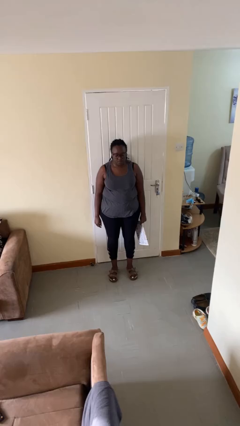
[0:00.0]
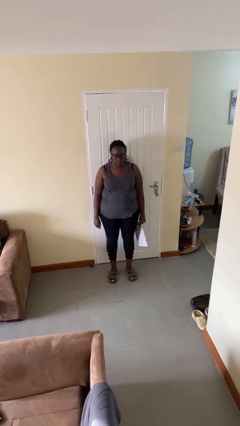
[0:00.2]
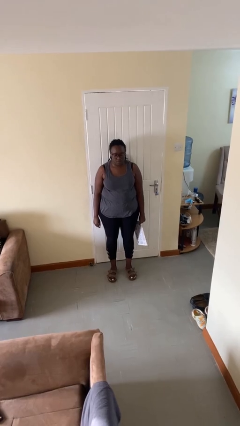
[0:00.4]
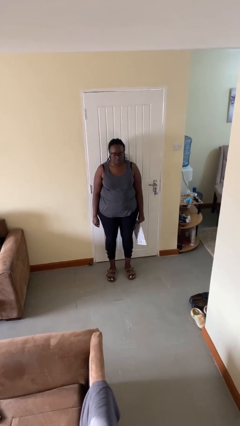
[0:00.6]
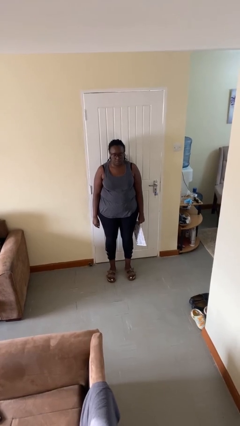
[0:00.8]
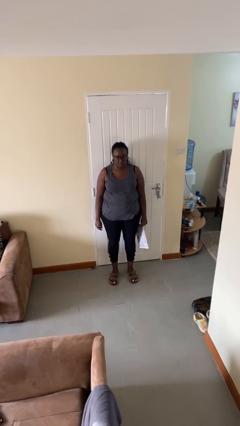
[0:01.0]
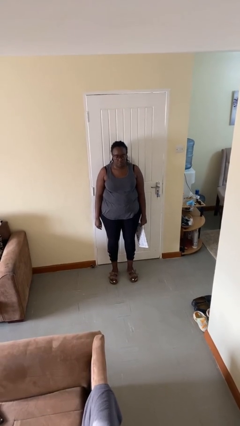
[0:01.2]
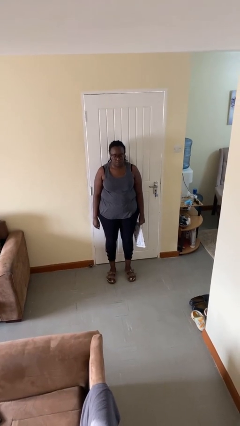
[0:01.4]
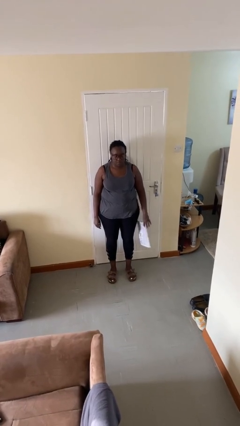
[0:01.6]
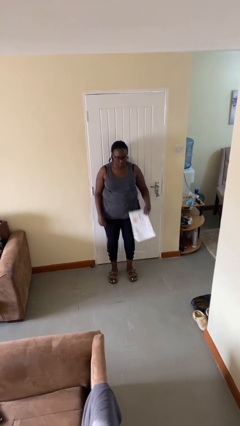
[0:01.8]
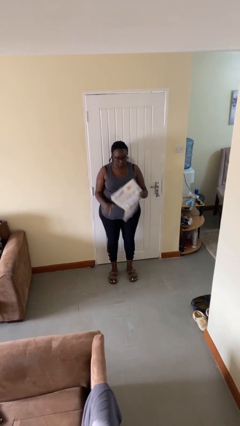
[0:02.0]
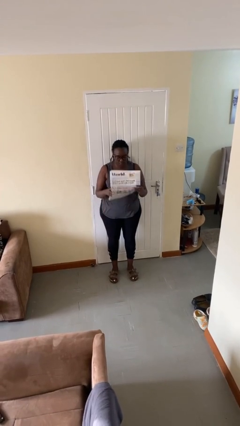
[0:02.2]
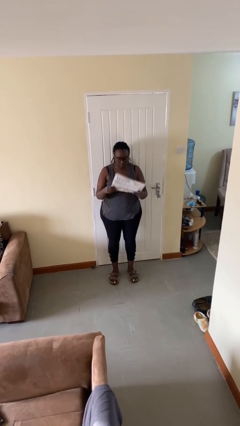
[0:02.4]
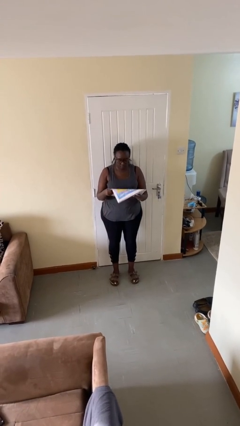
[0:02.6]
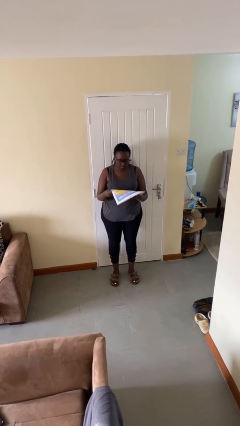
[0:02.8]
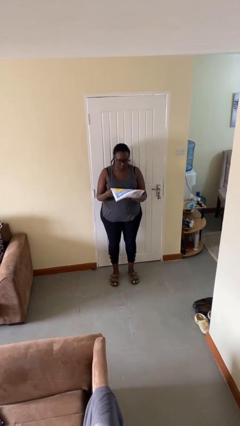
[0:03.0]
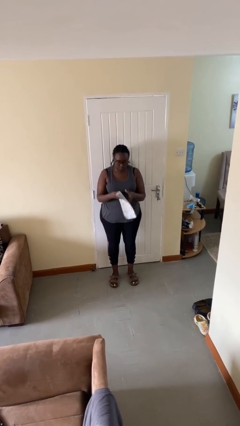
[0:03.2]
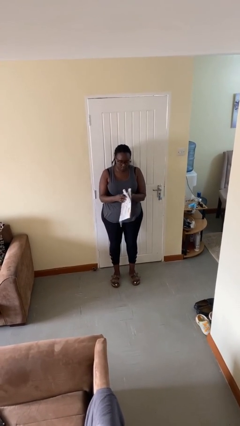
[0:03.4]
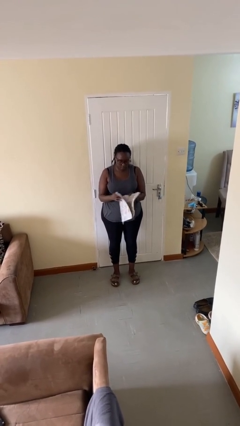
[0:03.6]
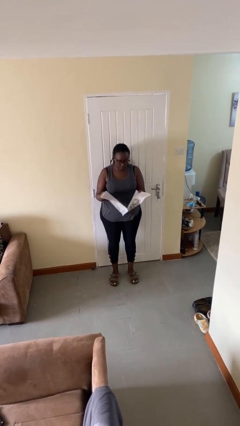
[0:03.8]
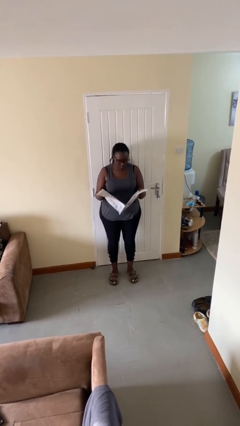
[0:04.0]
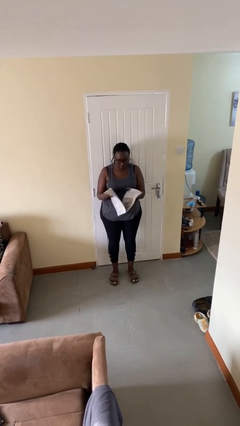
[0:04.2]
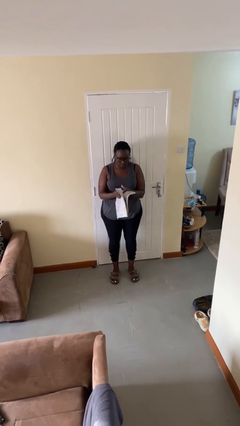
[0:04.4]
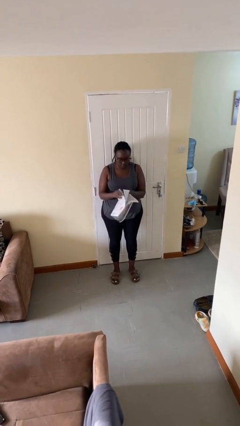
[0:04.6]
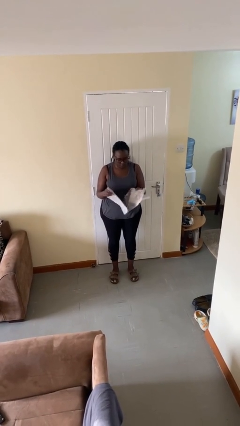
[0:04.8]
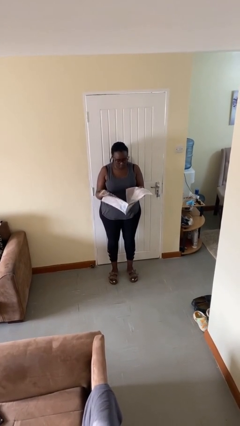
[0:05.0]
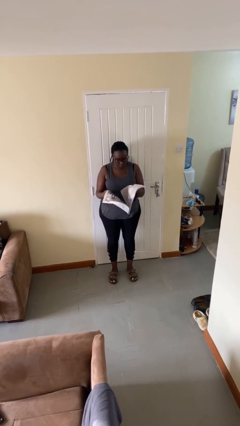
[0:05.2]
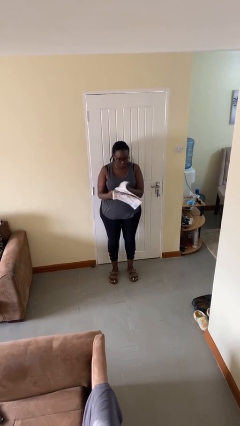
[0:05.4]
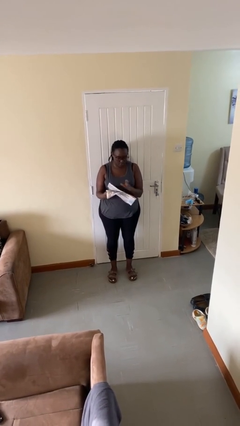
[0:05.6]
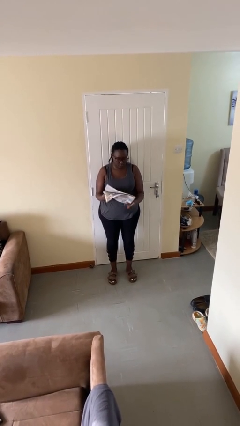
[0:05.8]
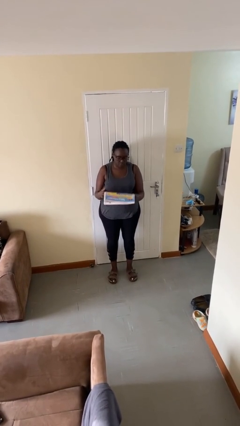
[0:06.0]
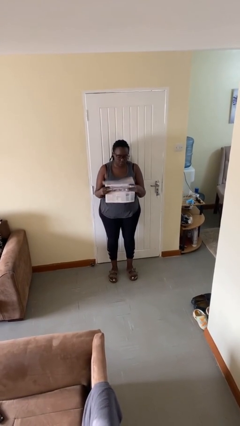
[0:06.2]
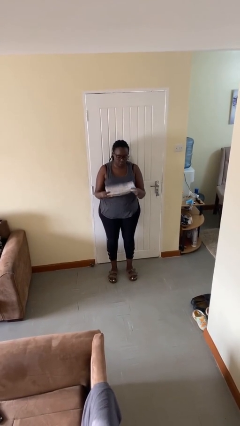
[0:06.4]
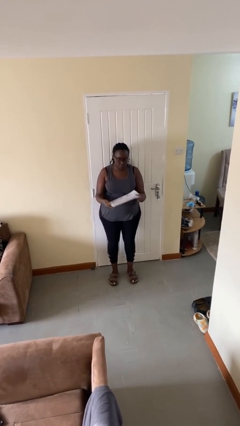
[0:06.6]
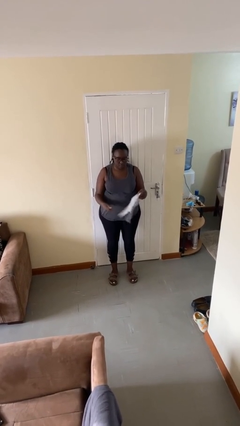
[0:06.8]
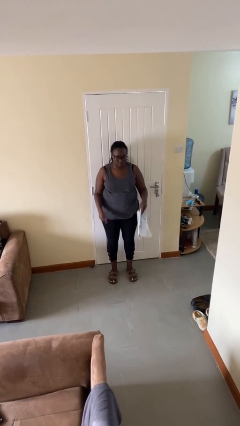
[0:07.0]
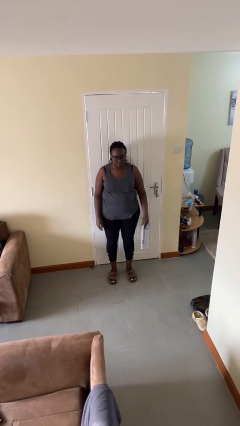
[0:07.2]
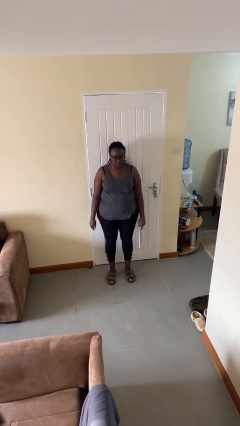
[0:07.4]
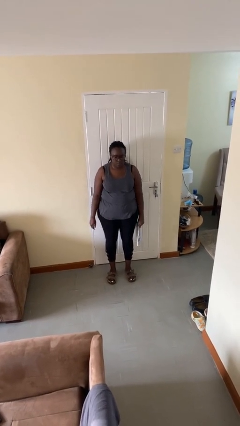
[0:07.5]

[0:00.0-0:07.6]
person reads newspaper

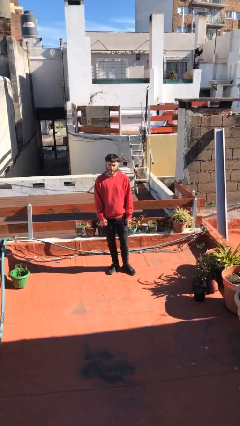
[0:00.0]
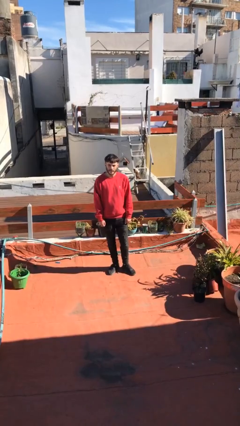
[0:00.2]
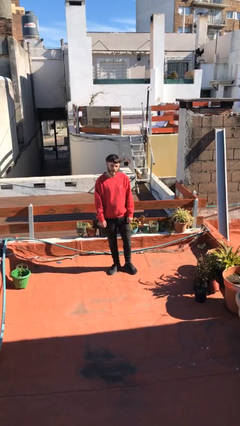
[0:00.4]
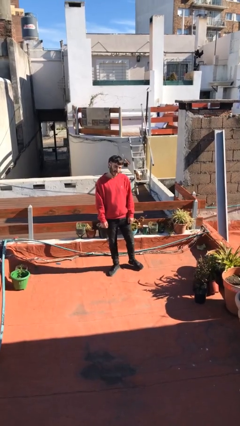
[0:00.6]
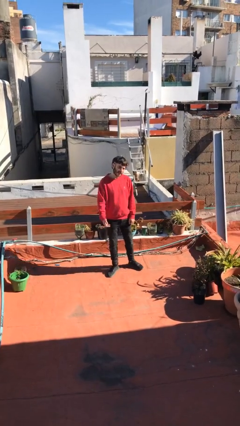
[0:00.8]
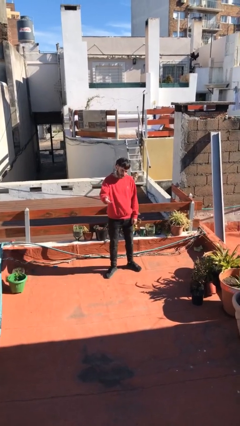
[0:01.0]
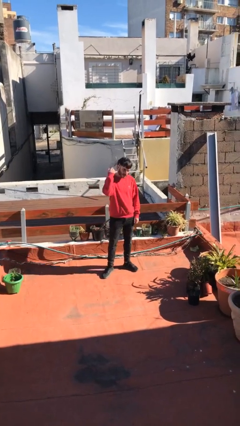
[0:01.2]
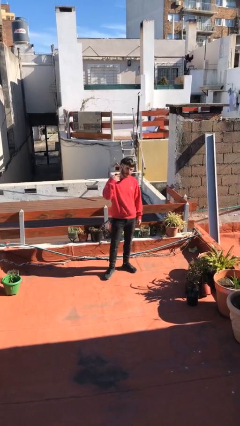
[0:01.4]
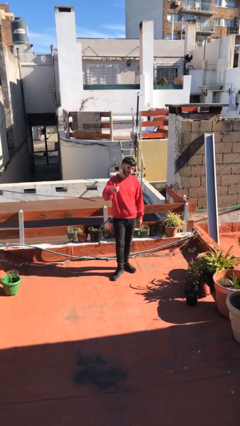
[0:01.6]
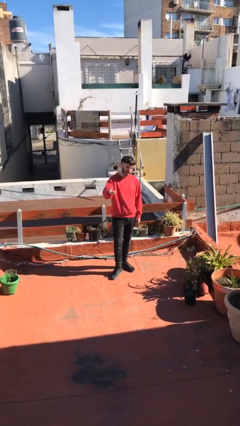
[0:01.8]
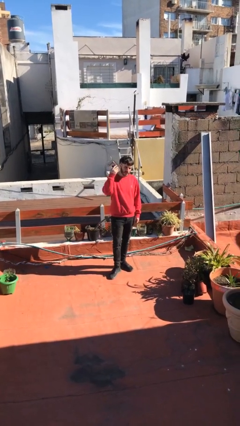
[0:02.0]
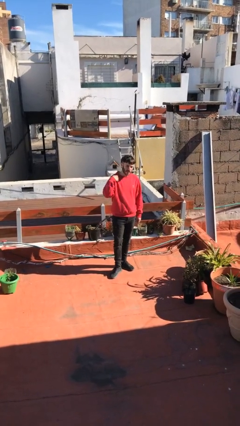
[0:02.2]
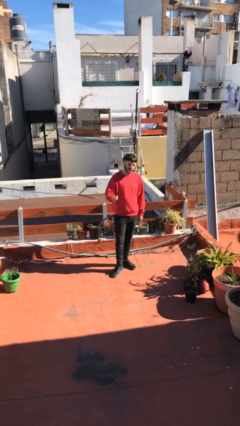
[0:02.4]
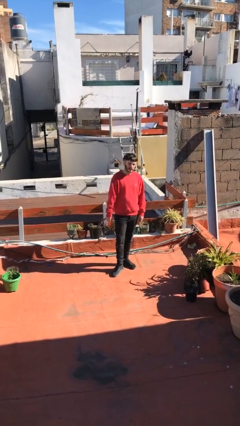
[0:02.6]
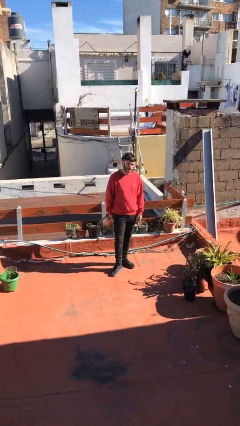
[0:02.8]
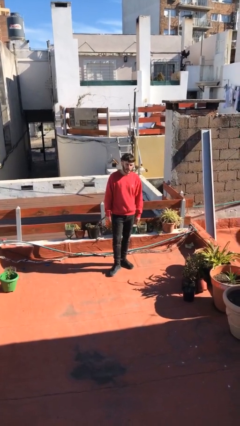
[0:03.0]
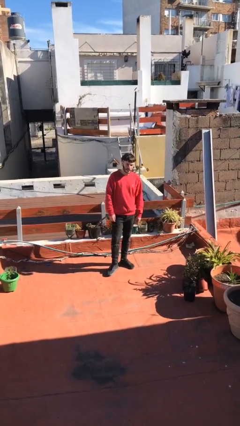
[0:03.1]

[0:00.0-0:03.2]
person gestures come here

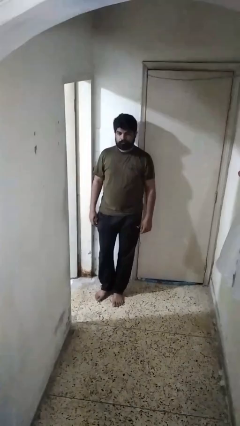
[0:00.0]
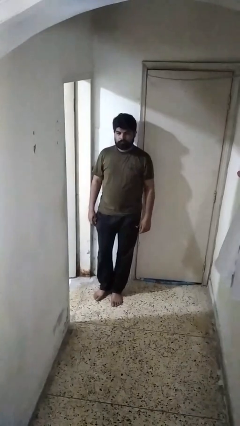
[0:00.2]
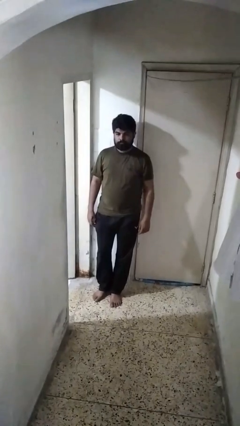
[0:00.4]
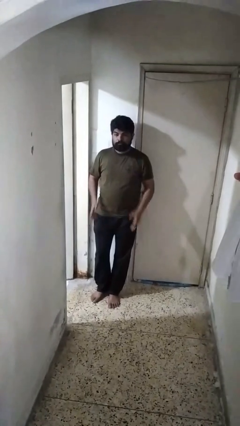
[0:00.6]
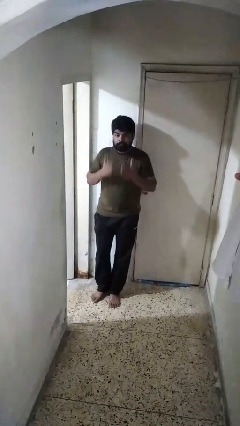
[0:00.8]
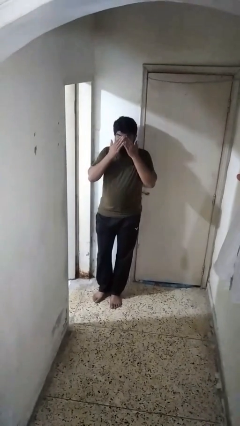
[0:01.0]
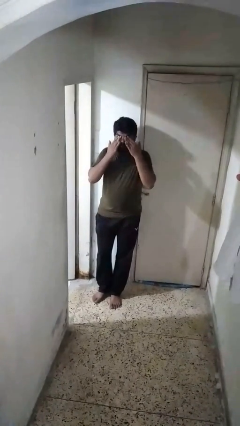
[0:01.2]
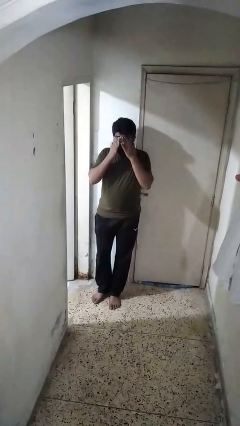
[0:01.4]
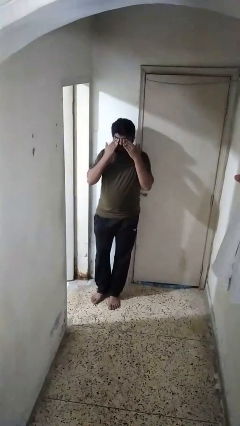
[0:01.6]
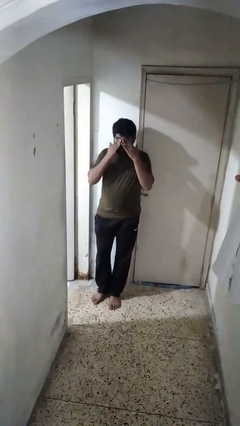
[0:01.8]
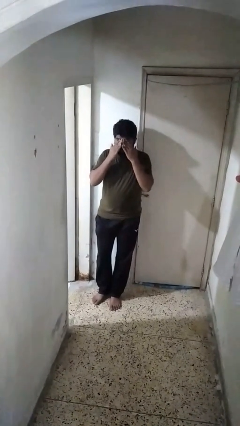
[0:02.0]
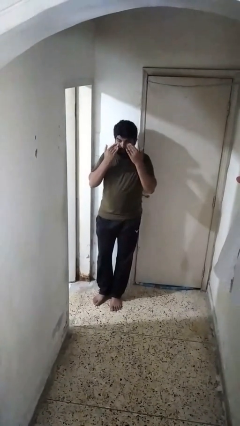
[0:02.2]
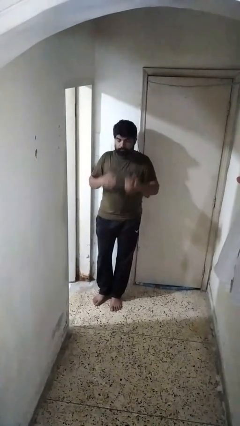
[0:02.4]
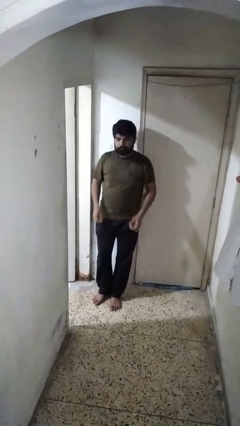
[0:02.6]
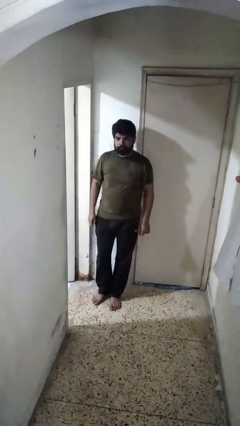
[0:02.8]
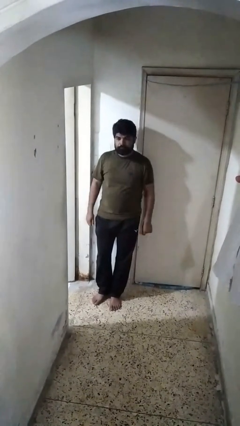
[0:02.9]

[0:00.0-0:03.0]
person rubs eyes

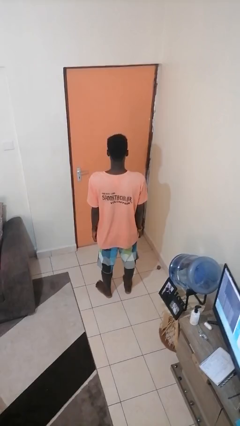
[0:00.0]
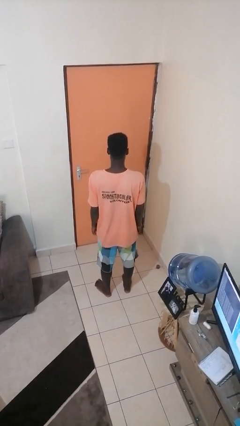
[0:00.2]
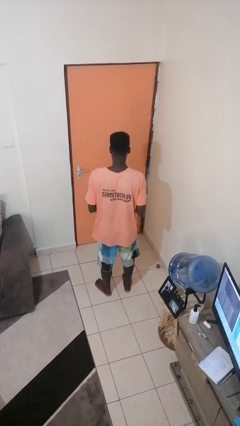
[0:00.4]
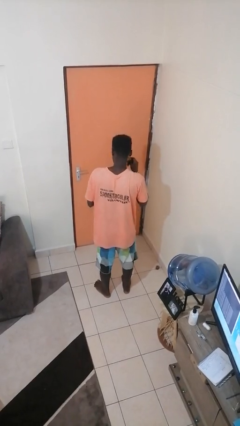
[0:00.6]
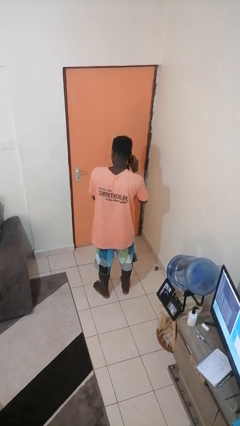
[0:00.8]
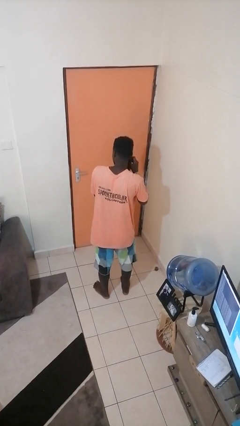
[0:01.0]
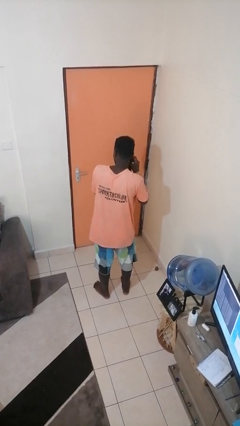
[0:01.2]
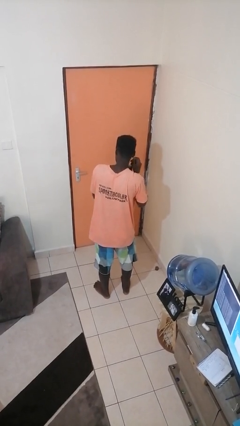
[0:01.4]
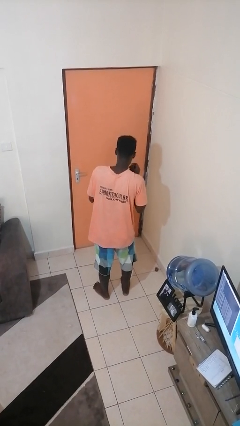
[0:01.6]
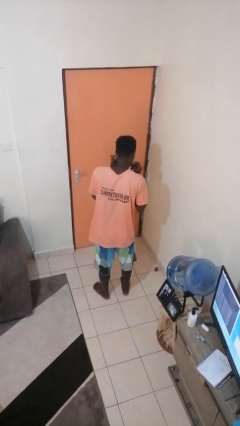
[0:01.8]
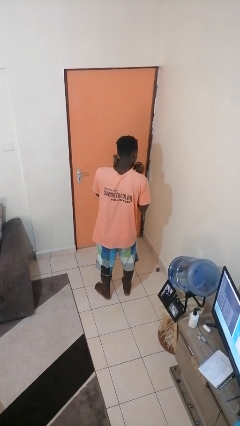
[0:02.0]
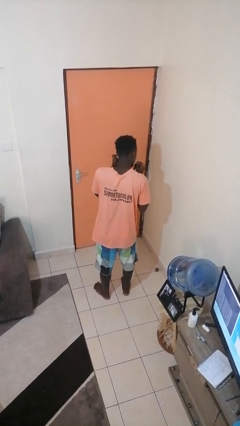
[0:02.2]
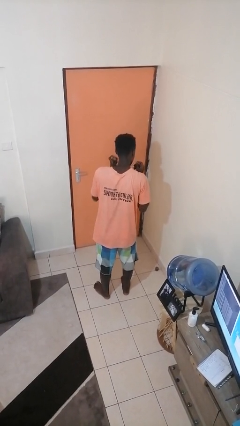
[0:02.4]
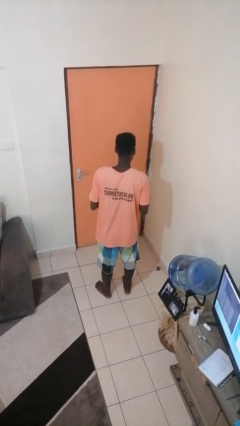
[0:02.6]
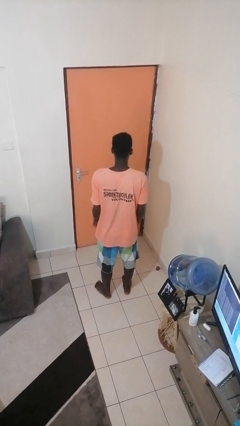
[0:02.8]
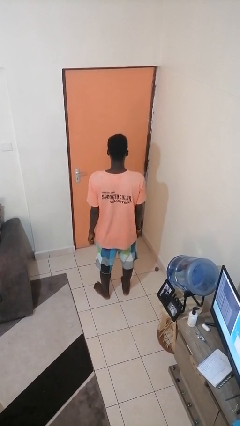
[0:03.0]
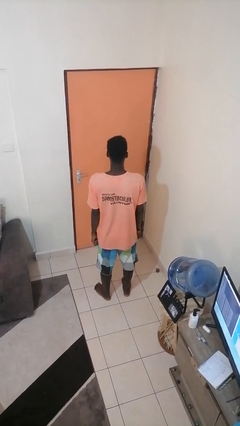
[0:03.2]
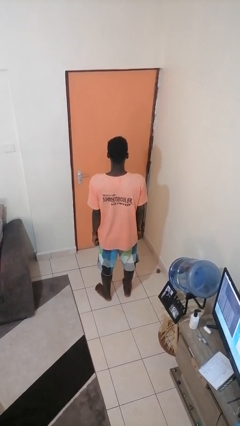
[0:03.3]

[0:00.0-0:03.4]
person puts on earrings

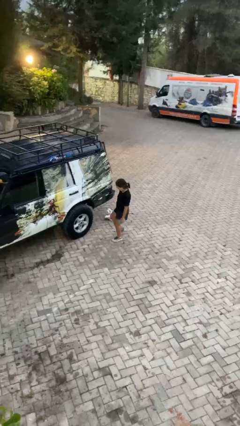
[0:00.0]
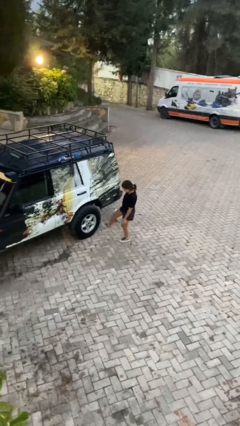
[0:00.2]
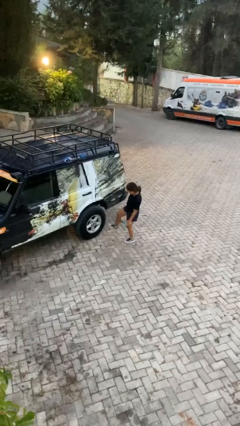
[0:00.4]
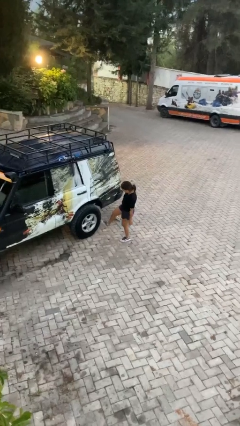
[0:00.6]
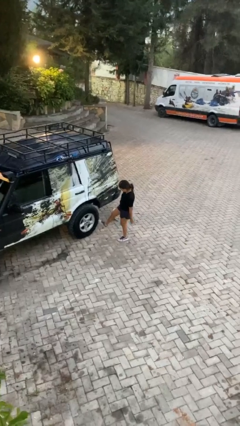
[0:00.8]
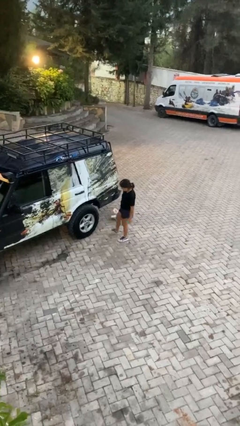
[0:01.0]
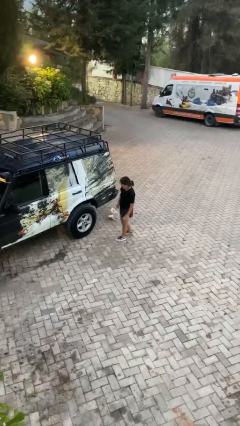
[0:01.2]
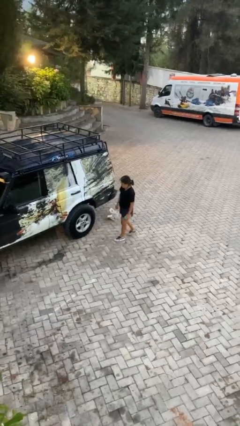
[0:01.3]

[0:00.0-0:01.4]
person kicks car tires
